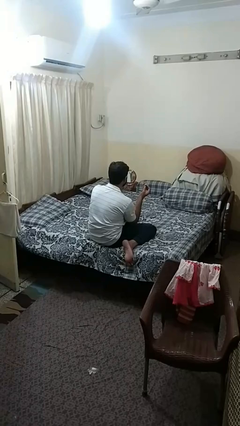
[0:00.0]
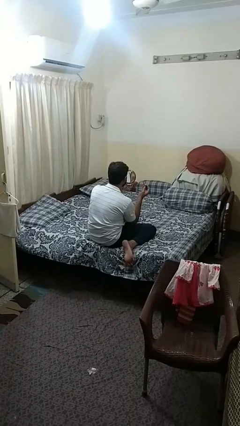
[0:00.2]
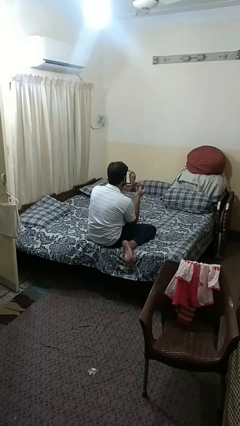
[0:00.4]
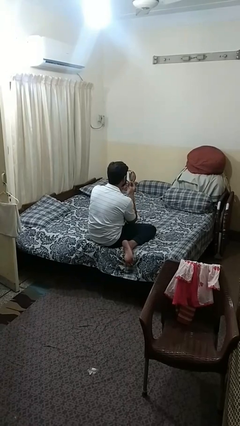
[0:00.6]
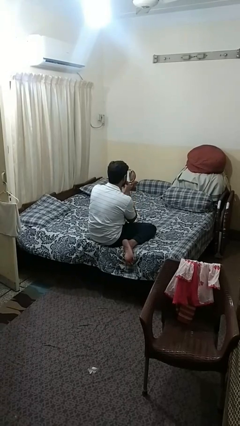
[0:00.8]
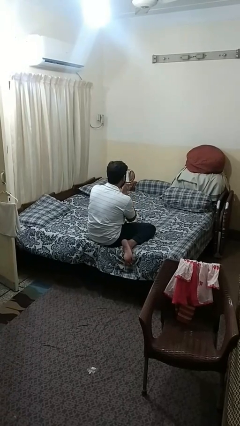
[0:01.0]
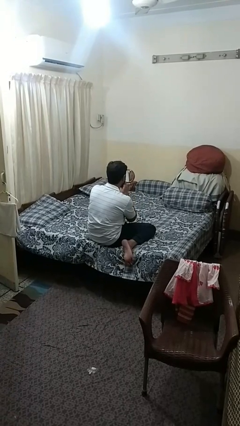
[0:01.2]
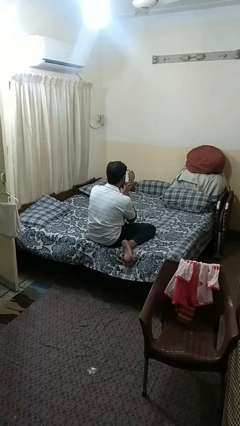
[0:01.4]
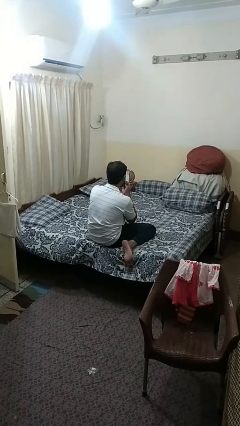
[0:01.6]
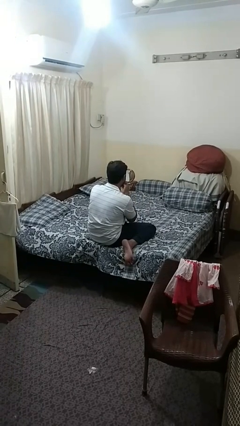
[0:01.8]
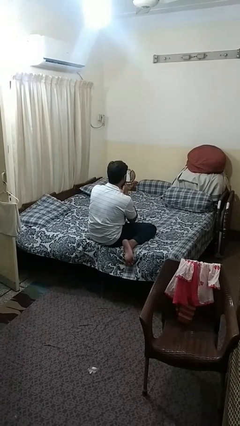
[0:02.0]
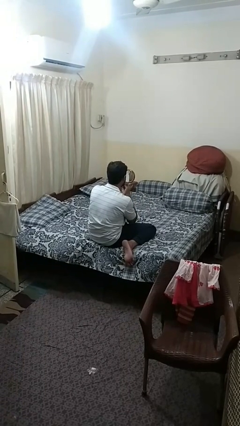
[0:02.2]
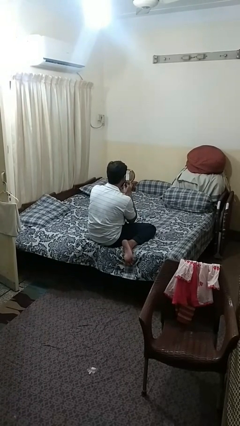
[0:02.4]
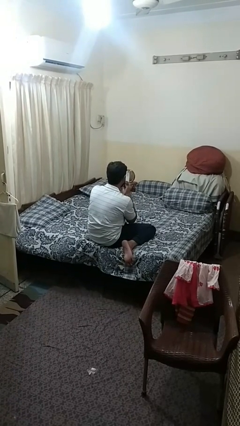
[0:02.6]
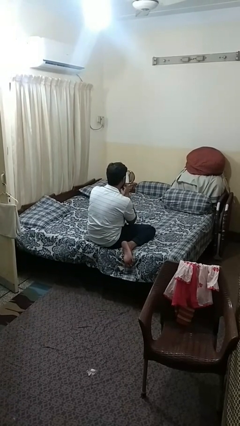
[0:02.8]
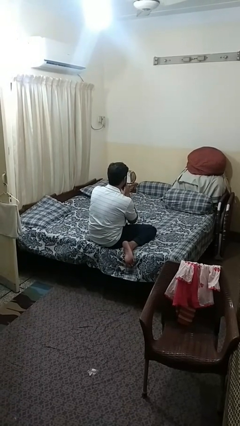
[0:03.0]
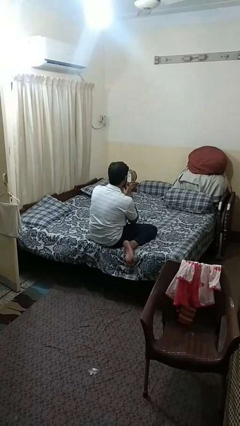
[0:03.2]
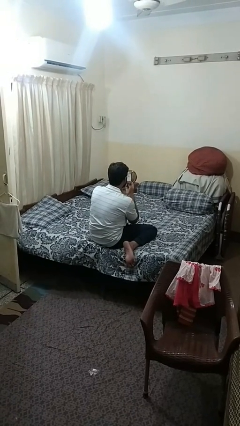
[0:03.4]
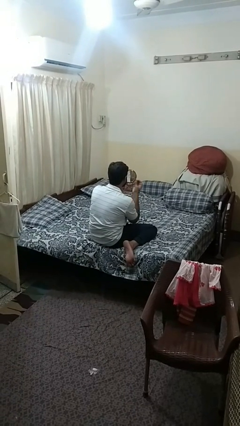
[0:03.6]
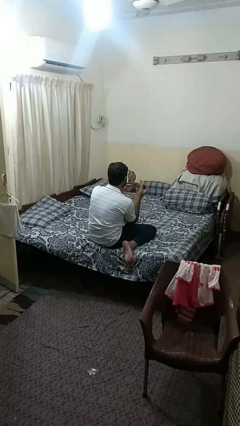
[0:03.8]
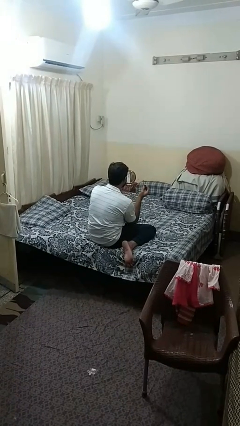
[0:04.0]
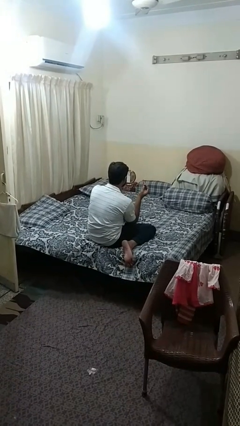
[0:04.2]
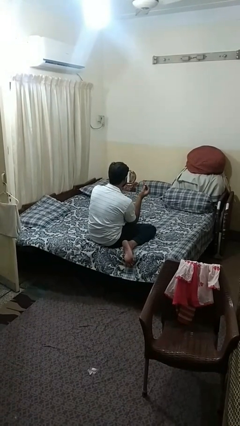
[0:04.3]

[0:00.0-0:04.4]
person applies lip makeup

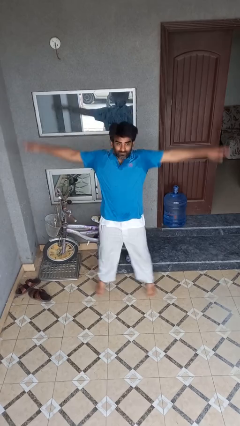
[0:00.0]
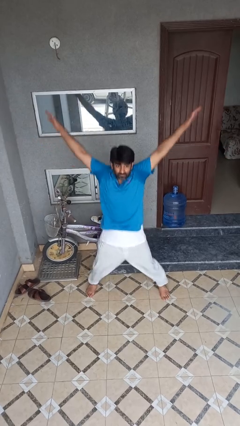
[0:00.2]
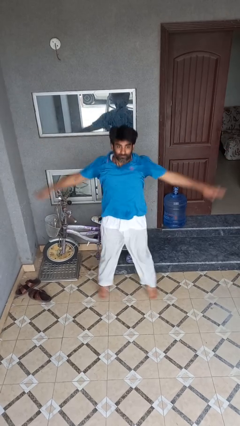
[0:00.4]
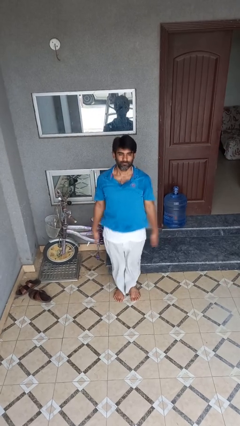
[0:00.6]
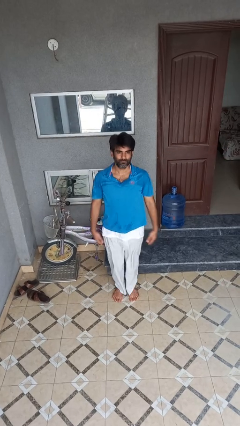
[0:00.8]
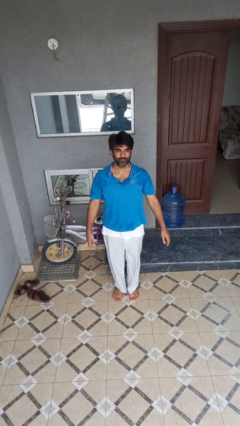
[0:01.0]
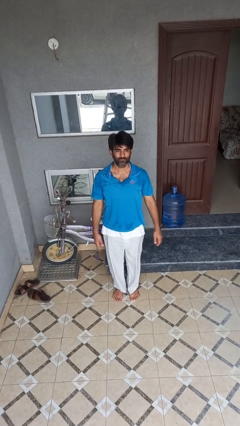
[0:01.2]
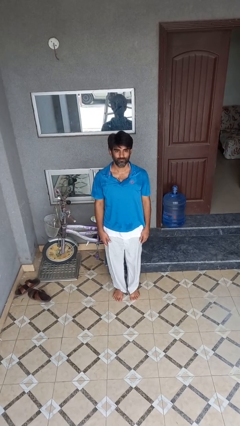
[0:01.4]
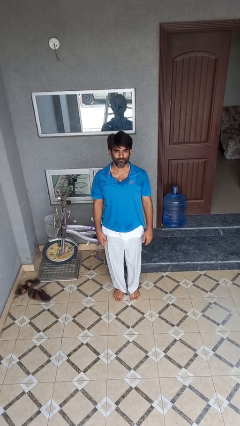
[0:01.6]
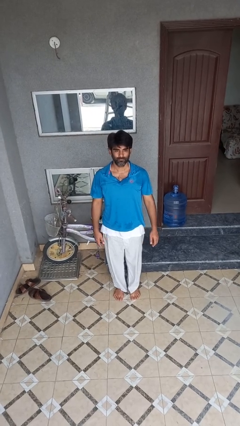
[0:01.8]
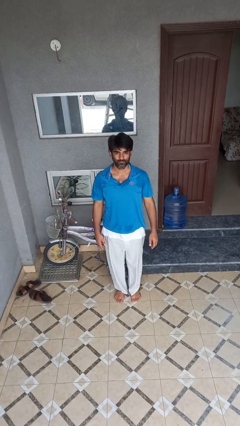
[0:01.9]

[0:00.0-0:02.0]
person exercises with jumping jacks

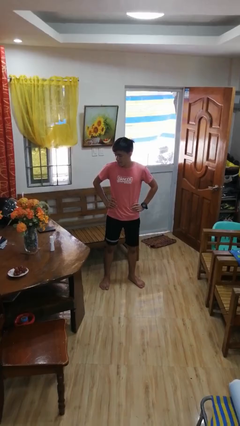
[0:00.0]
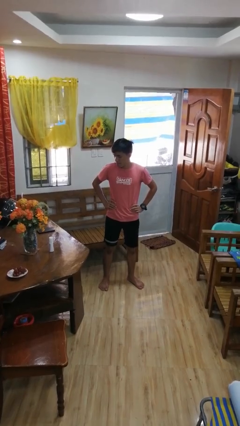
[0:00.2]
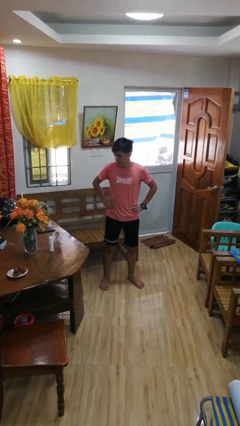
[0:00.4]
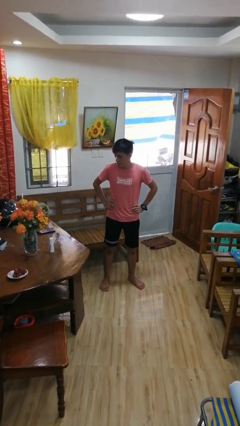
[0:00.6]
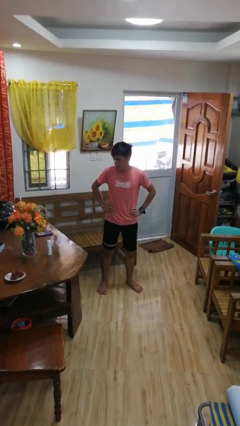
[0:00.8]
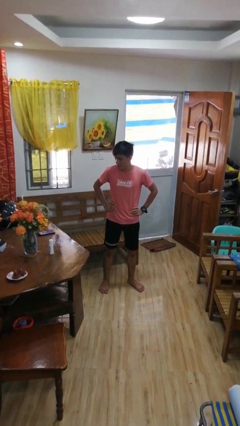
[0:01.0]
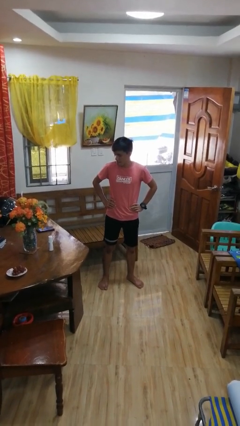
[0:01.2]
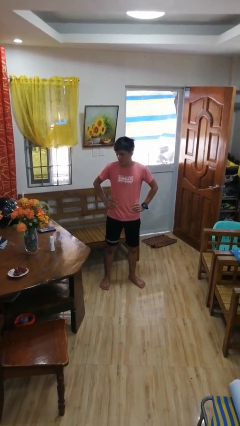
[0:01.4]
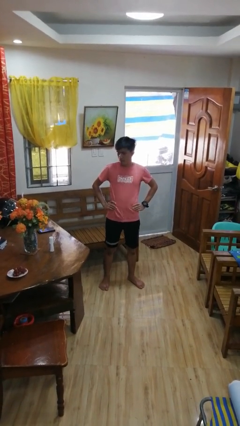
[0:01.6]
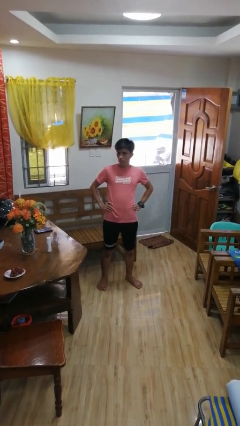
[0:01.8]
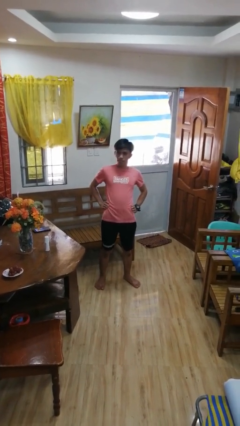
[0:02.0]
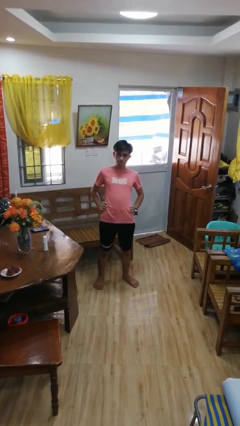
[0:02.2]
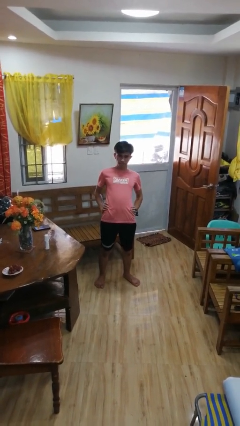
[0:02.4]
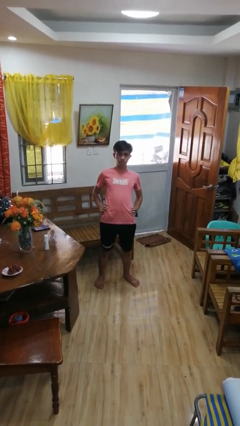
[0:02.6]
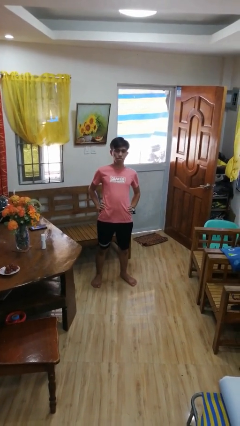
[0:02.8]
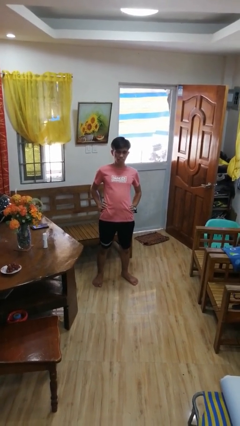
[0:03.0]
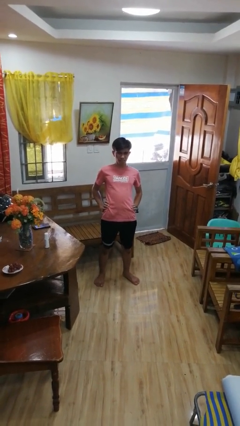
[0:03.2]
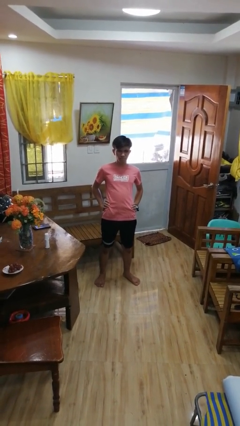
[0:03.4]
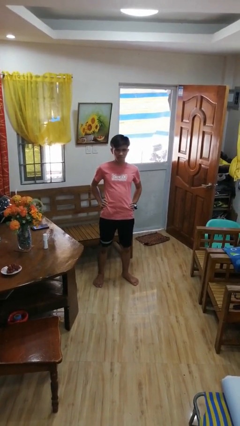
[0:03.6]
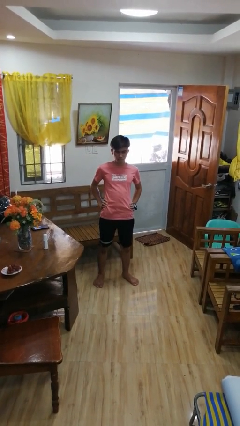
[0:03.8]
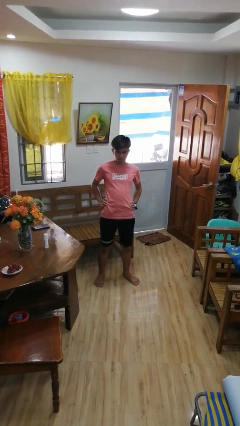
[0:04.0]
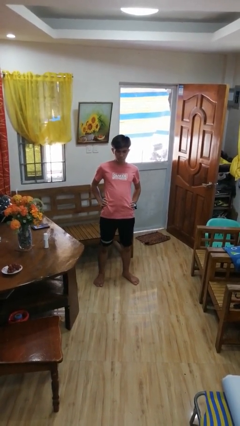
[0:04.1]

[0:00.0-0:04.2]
person stretches back

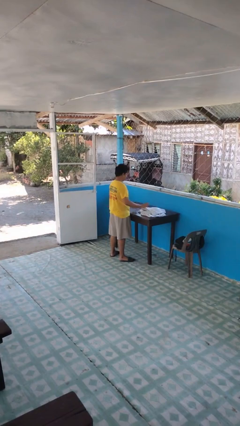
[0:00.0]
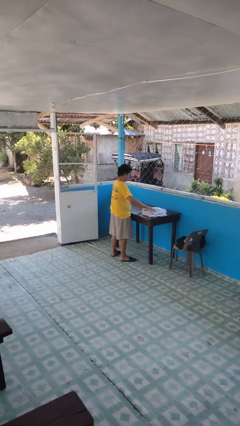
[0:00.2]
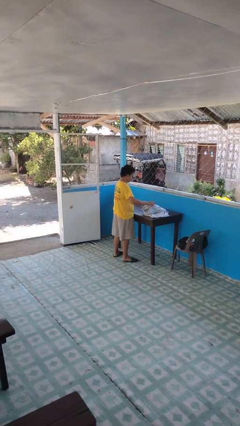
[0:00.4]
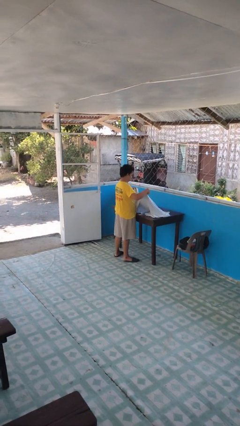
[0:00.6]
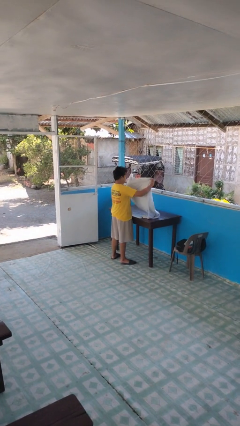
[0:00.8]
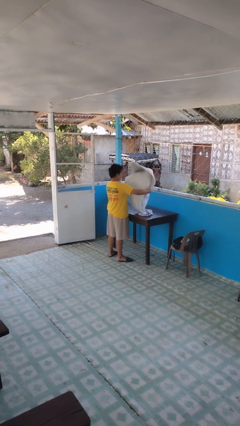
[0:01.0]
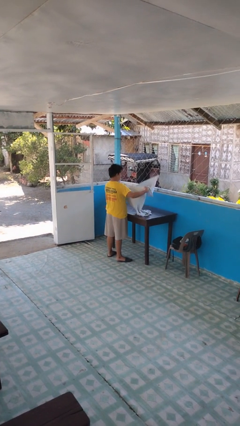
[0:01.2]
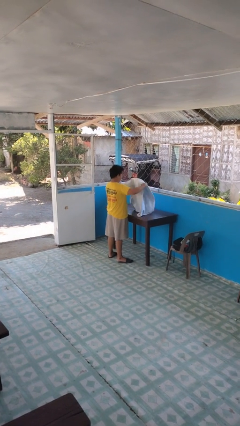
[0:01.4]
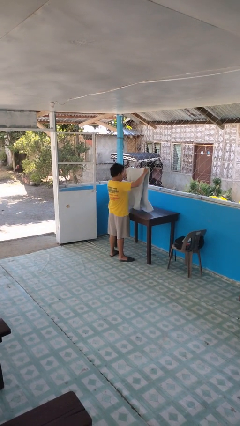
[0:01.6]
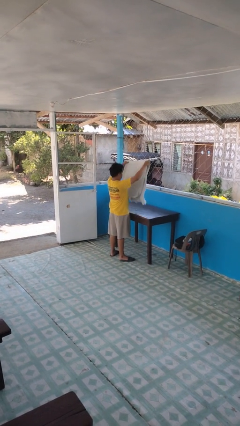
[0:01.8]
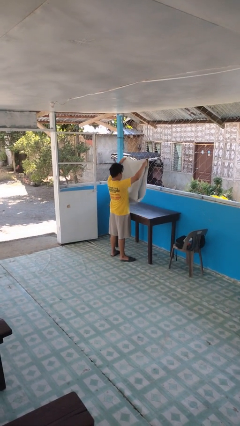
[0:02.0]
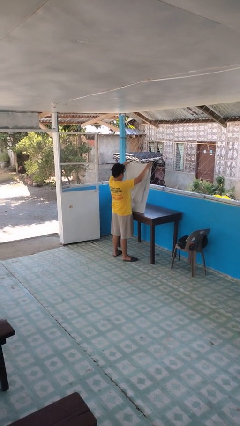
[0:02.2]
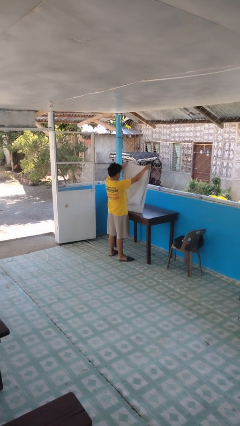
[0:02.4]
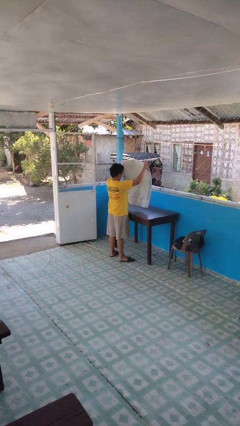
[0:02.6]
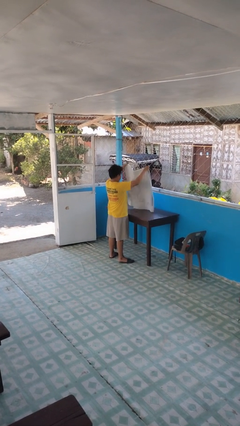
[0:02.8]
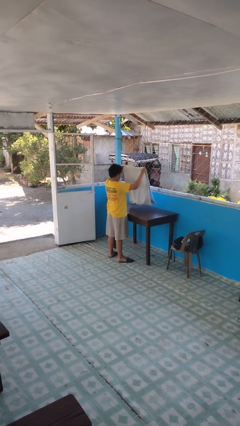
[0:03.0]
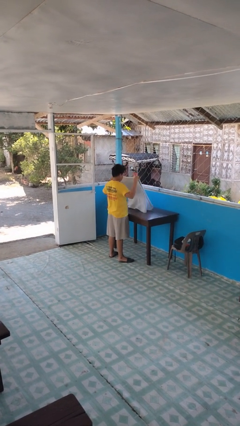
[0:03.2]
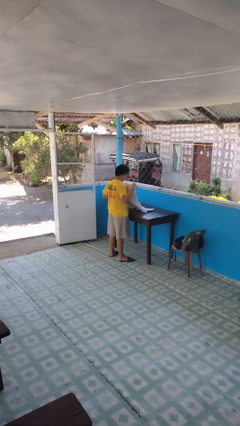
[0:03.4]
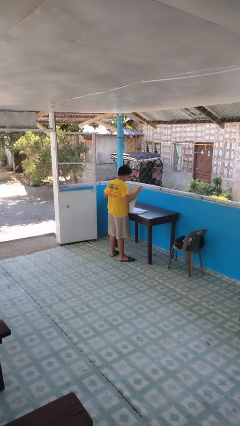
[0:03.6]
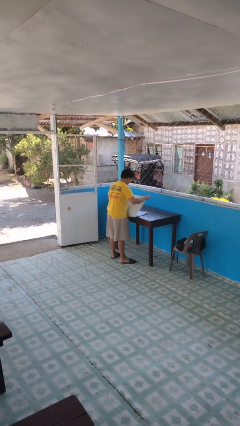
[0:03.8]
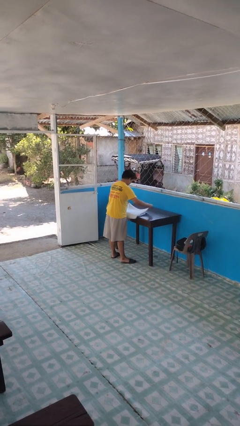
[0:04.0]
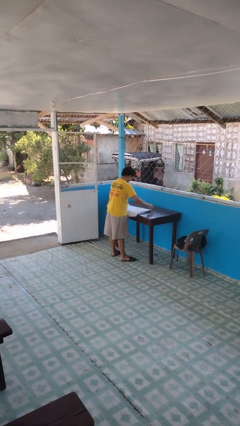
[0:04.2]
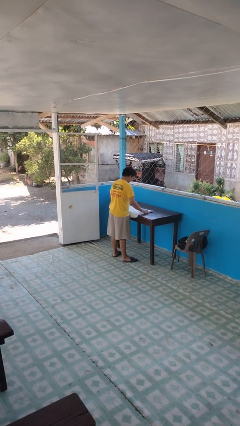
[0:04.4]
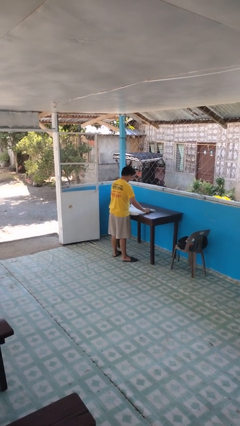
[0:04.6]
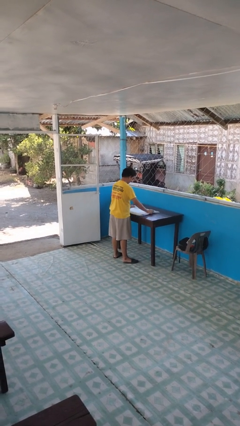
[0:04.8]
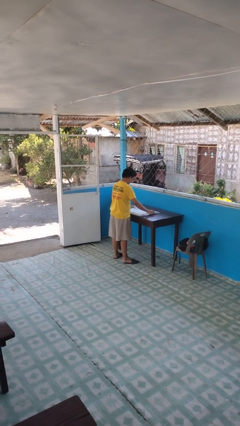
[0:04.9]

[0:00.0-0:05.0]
person folds blanket

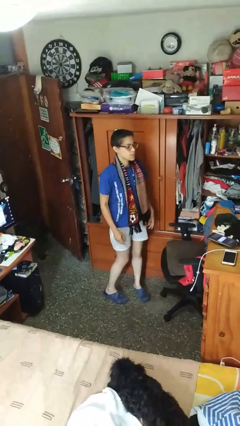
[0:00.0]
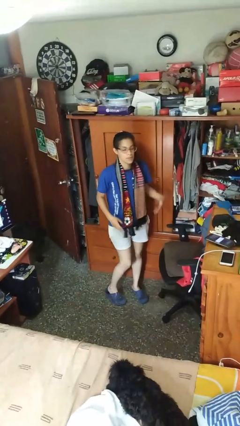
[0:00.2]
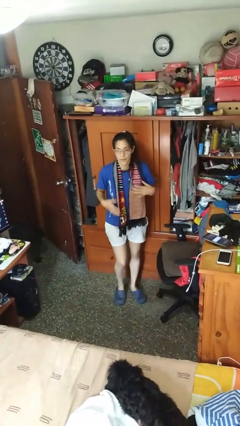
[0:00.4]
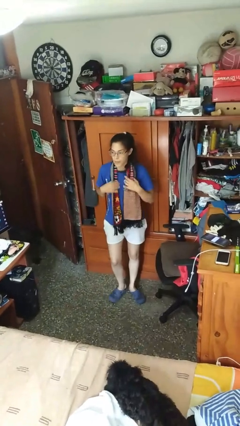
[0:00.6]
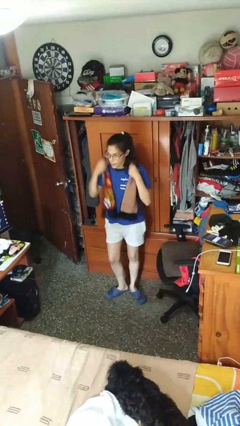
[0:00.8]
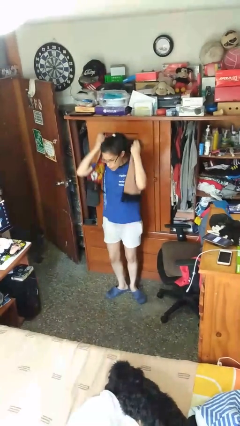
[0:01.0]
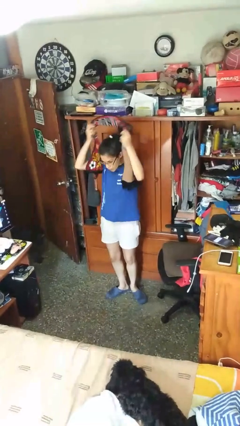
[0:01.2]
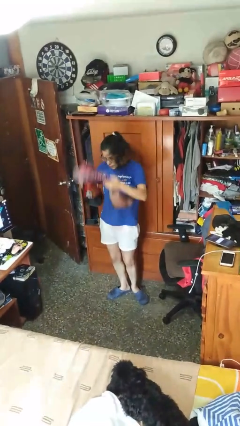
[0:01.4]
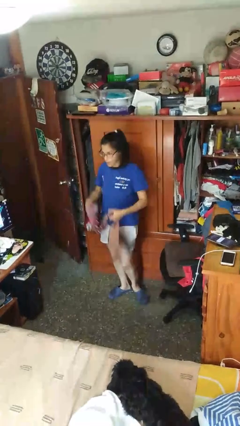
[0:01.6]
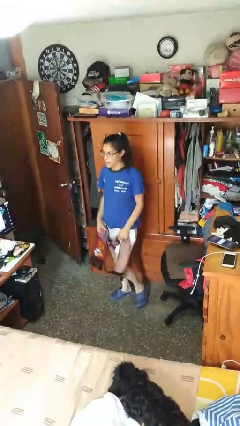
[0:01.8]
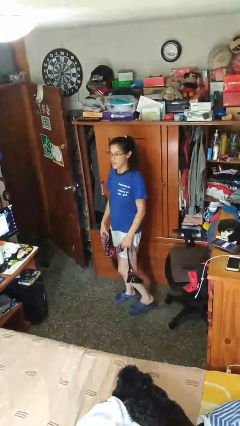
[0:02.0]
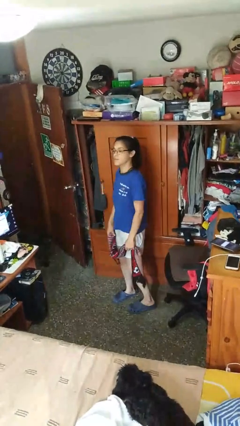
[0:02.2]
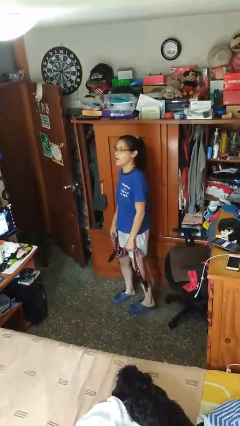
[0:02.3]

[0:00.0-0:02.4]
person takes off scarf
